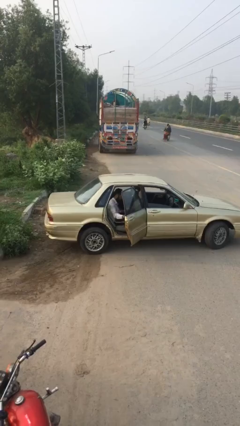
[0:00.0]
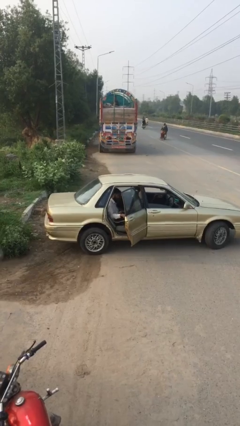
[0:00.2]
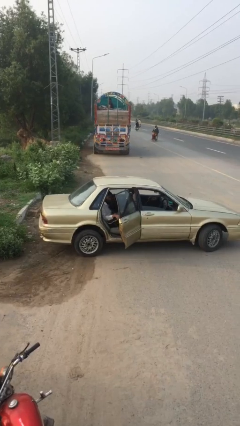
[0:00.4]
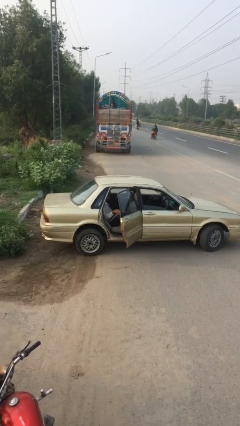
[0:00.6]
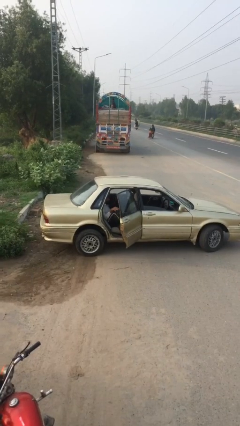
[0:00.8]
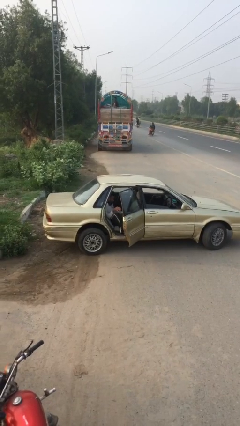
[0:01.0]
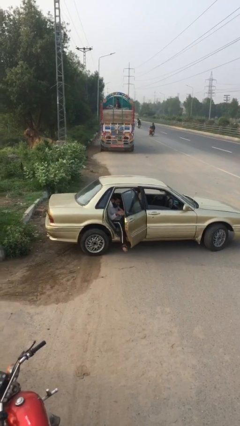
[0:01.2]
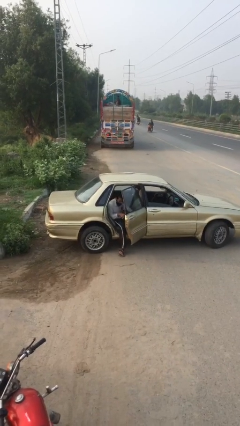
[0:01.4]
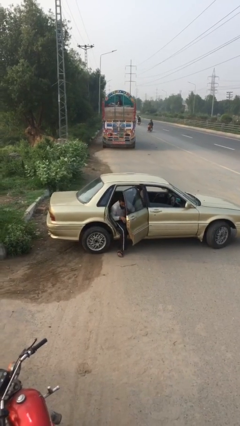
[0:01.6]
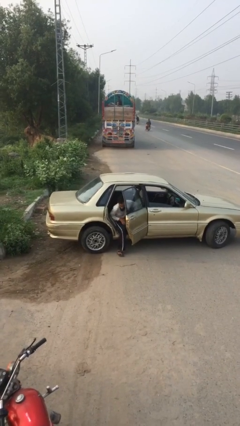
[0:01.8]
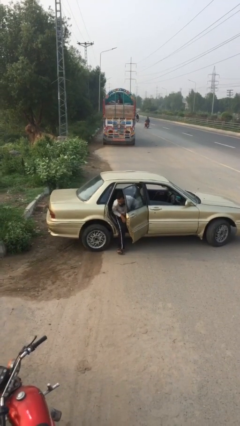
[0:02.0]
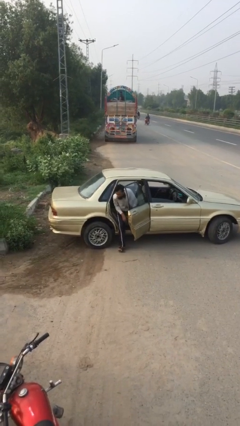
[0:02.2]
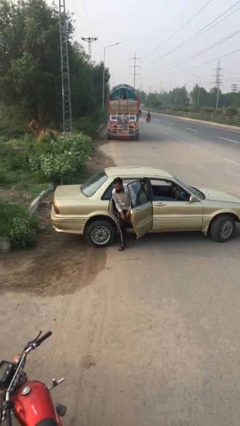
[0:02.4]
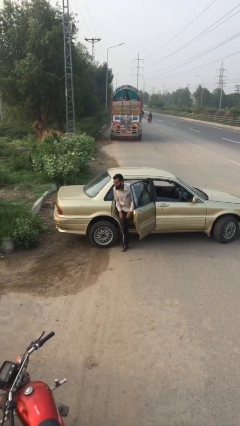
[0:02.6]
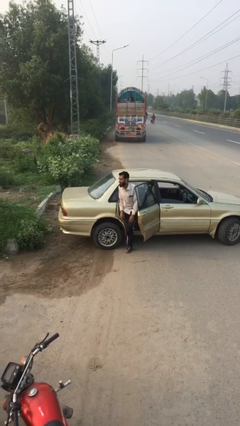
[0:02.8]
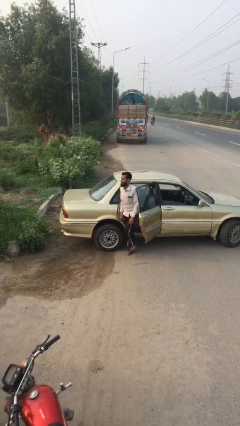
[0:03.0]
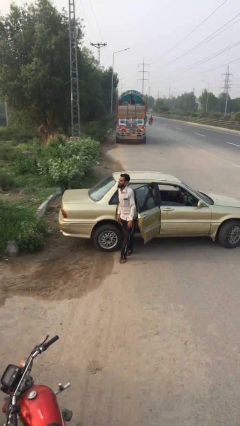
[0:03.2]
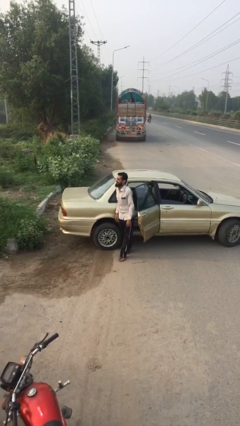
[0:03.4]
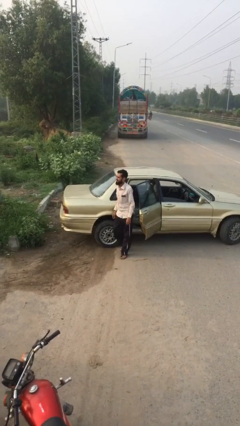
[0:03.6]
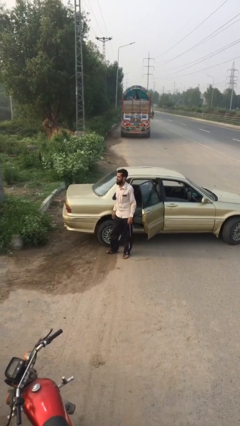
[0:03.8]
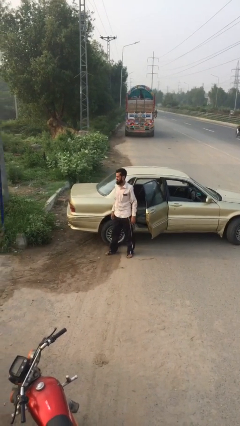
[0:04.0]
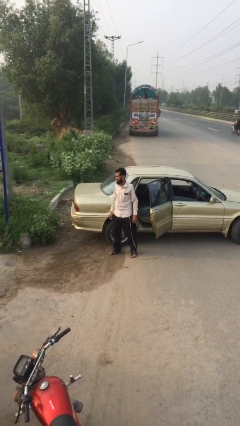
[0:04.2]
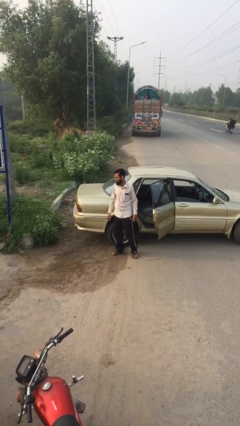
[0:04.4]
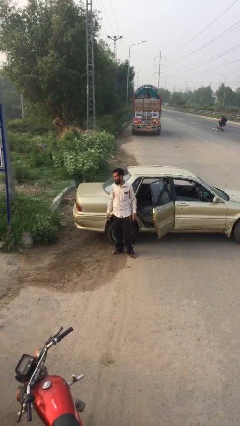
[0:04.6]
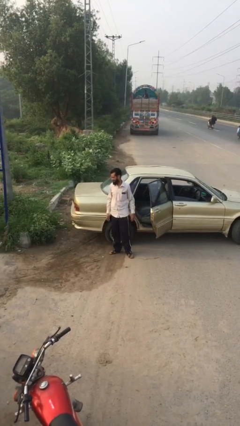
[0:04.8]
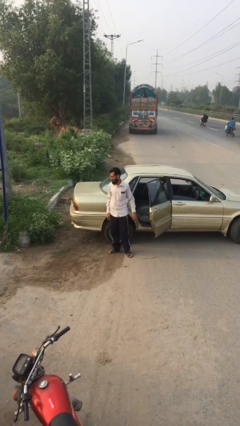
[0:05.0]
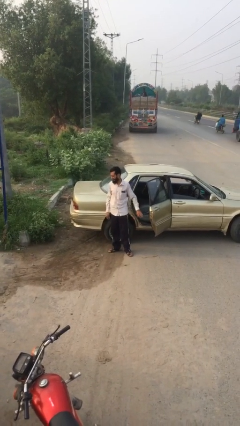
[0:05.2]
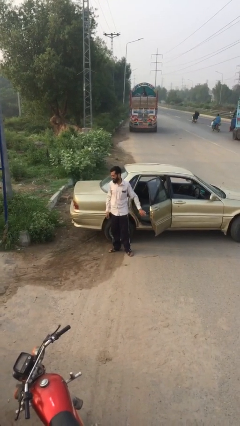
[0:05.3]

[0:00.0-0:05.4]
person exits car

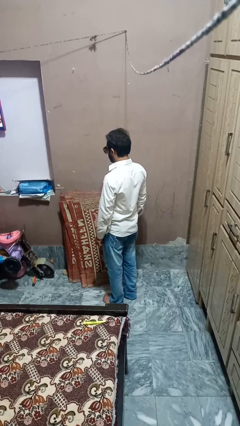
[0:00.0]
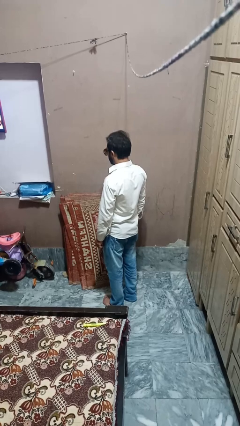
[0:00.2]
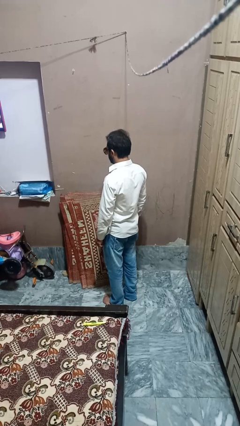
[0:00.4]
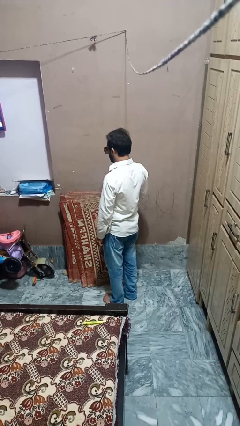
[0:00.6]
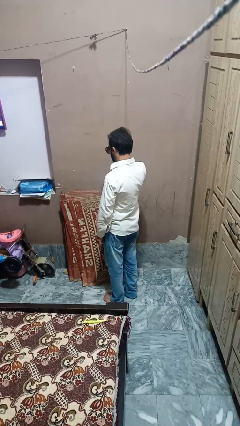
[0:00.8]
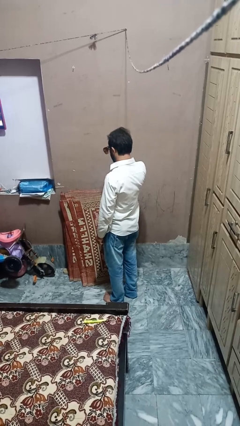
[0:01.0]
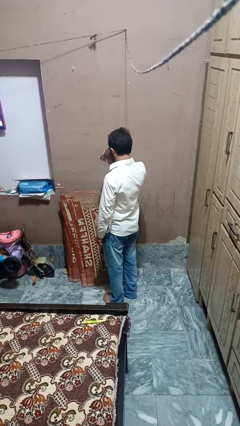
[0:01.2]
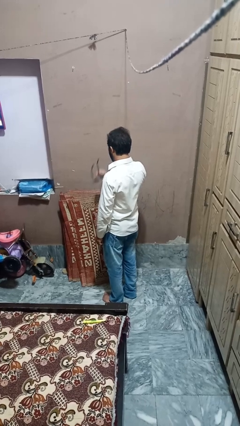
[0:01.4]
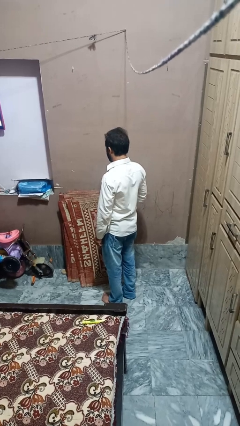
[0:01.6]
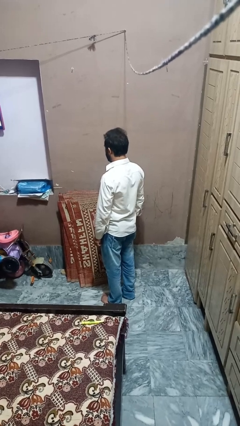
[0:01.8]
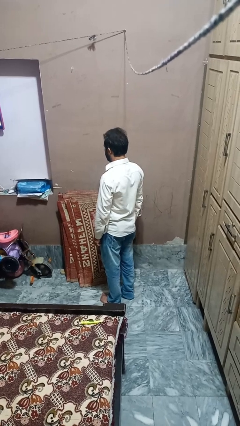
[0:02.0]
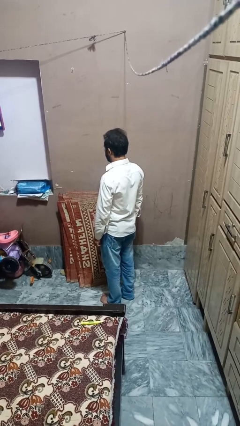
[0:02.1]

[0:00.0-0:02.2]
person takes off sunglasses

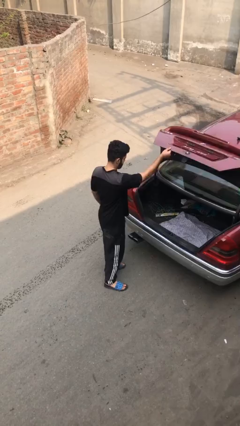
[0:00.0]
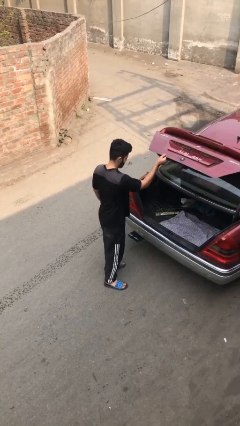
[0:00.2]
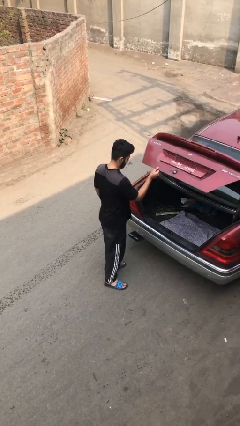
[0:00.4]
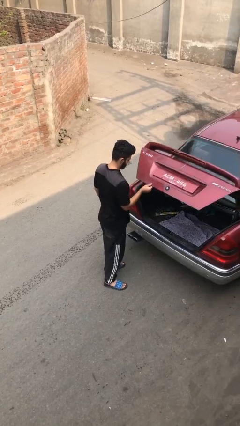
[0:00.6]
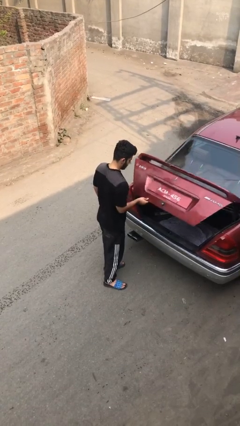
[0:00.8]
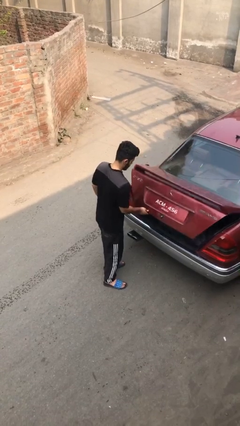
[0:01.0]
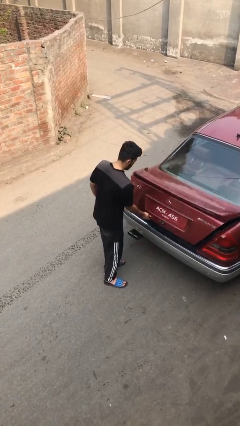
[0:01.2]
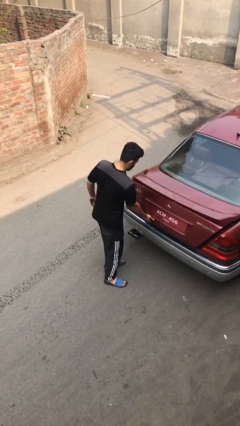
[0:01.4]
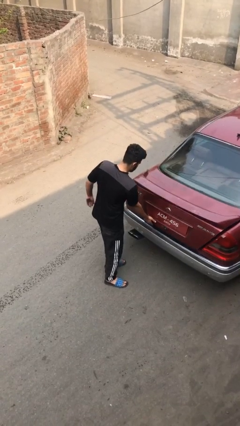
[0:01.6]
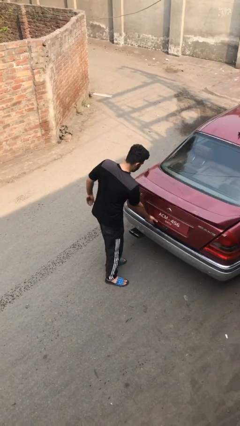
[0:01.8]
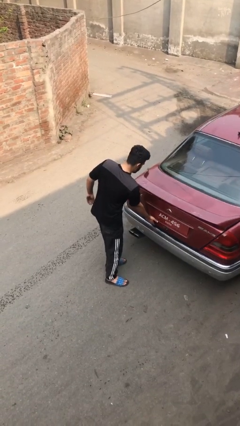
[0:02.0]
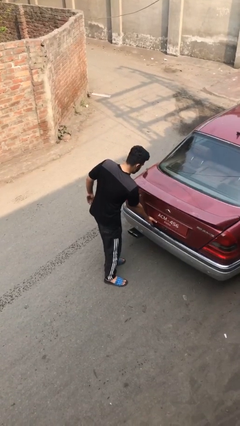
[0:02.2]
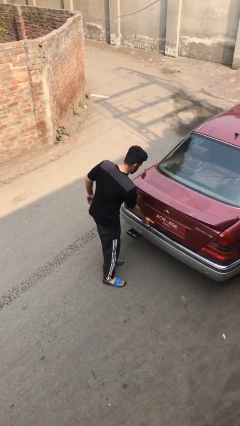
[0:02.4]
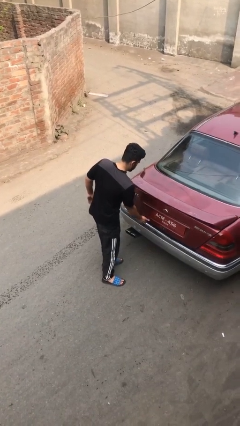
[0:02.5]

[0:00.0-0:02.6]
person closes car trunk

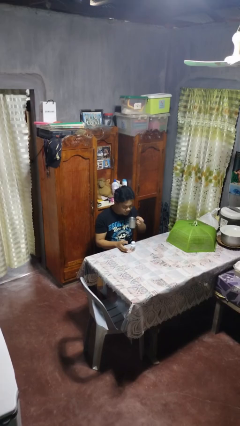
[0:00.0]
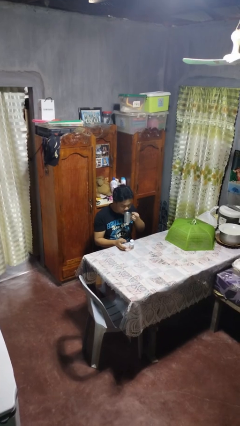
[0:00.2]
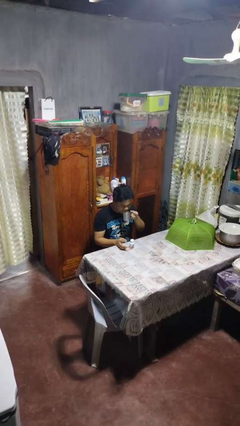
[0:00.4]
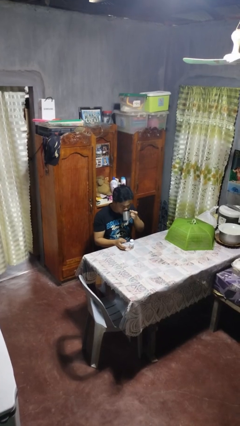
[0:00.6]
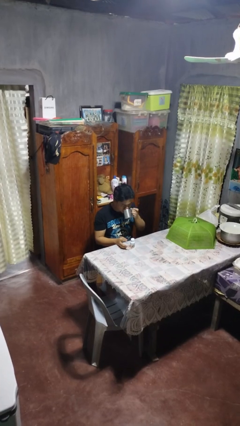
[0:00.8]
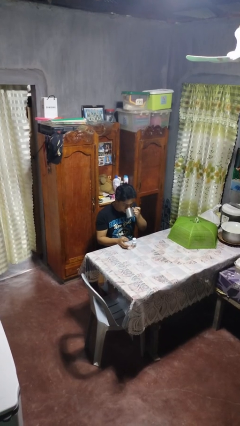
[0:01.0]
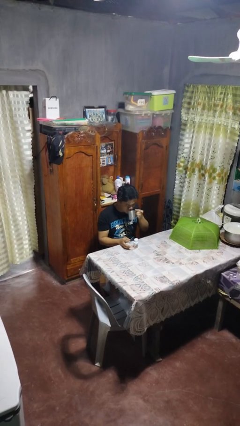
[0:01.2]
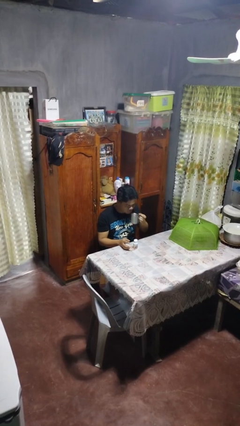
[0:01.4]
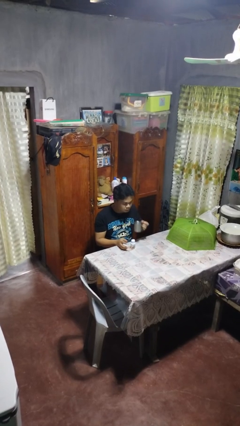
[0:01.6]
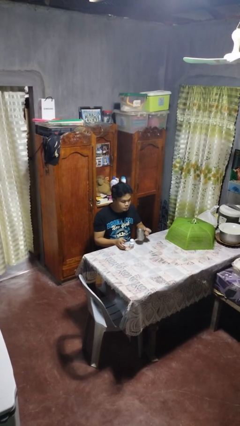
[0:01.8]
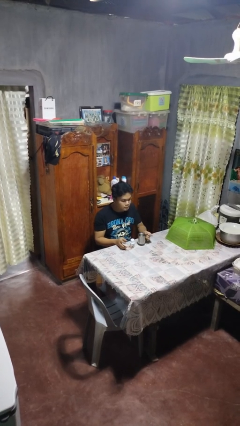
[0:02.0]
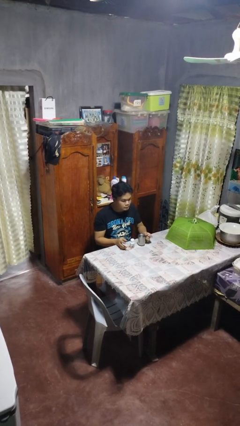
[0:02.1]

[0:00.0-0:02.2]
person drinks from cup

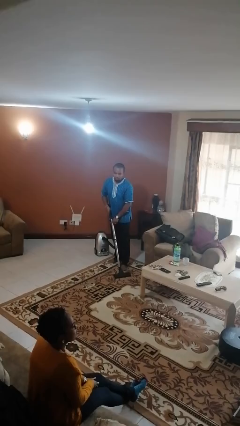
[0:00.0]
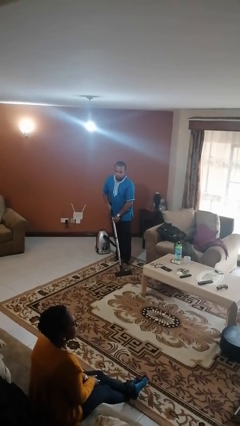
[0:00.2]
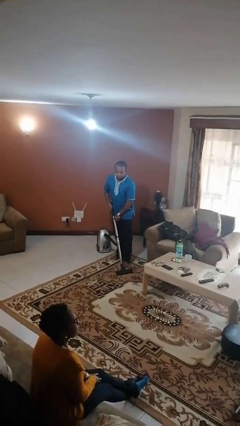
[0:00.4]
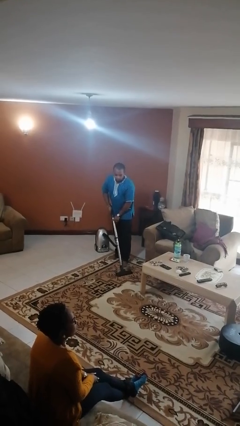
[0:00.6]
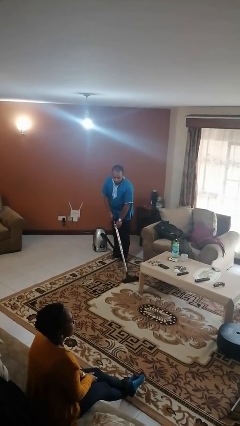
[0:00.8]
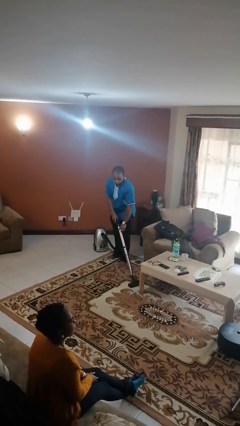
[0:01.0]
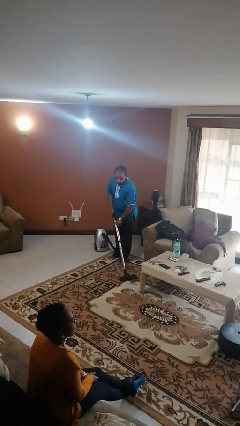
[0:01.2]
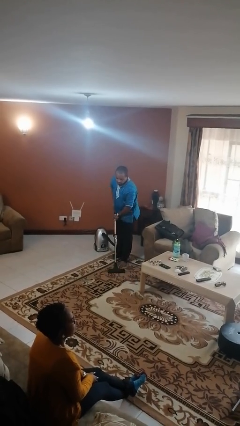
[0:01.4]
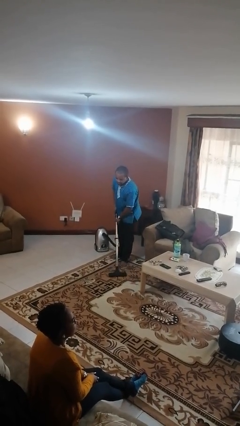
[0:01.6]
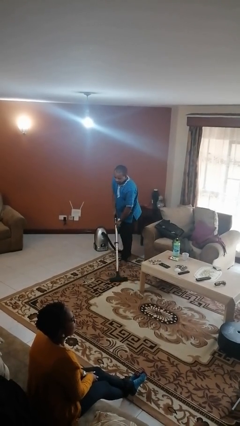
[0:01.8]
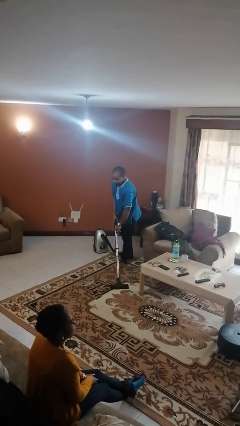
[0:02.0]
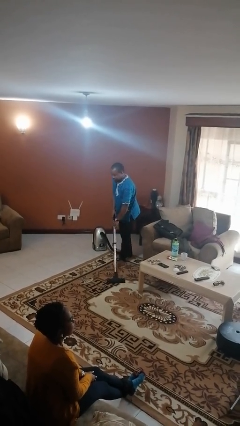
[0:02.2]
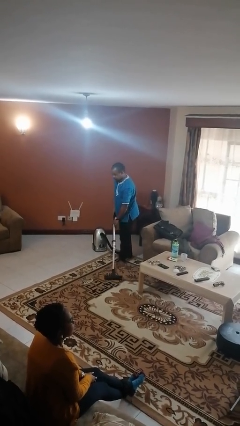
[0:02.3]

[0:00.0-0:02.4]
person vacuums carpet

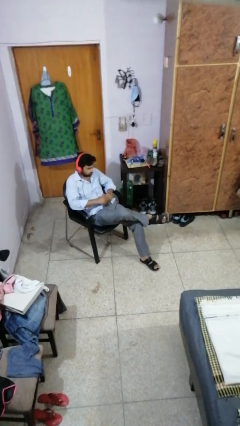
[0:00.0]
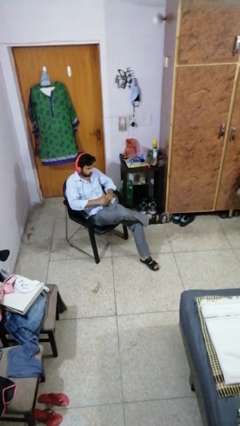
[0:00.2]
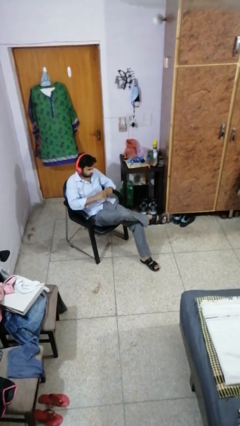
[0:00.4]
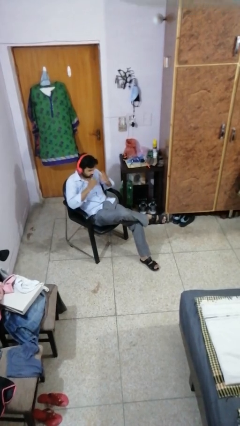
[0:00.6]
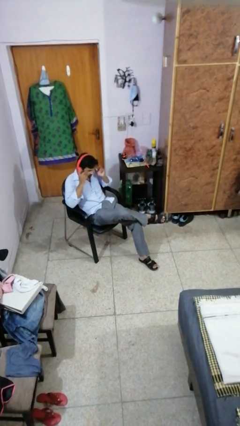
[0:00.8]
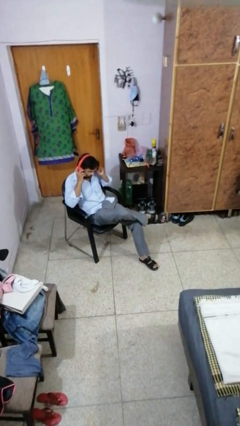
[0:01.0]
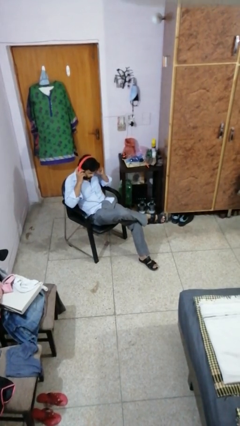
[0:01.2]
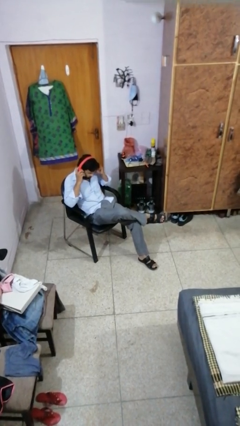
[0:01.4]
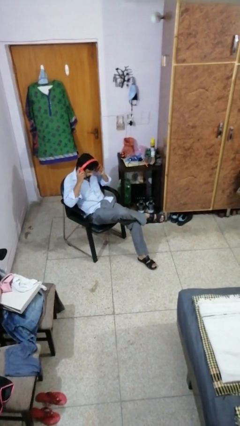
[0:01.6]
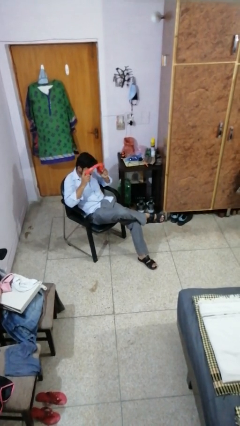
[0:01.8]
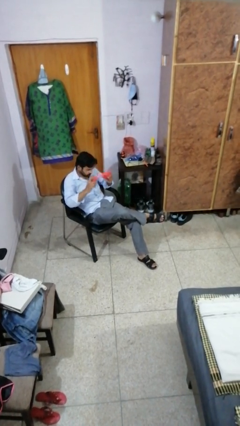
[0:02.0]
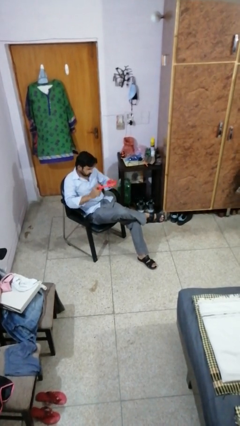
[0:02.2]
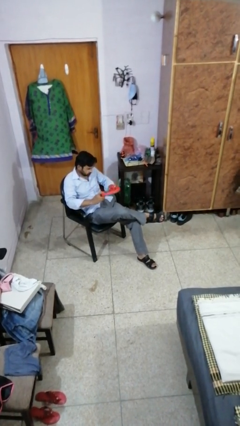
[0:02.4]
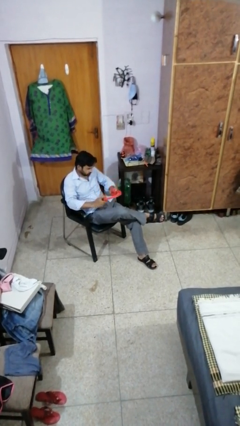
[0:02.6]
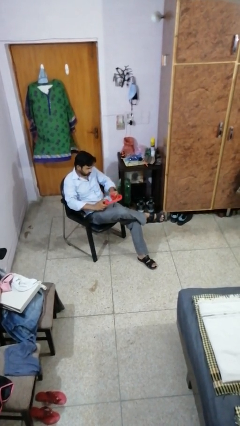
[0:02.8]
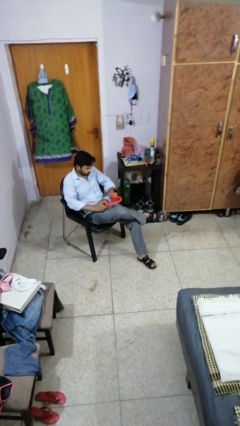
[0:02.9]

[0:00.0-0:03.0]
person takes off headphones
